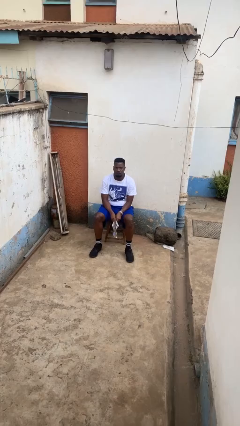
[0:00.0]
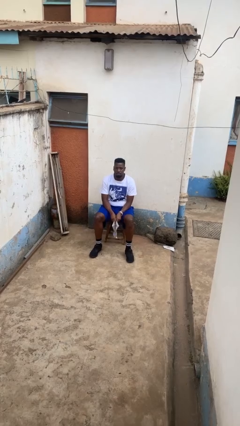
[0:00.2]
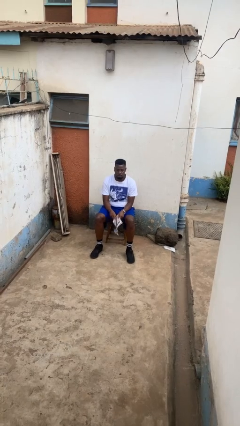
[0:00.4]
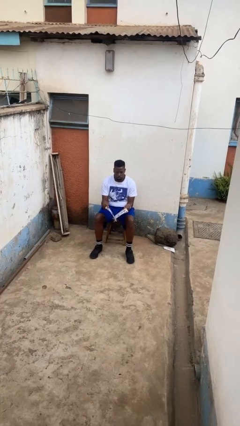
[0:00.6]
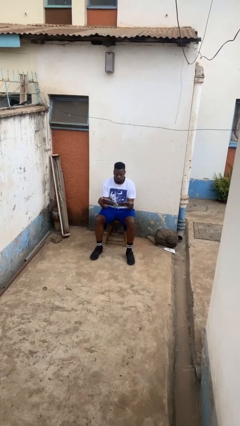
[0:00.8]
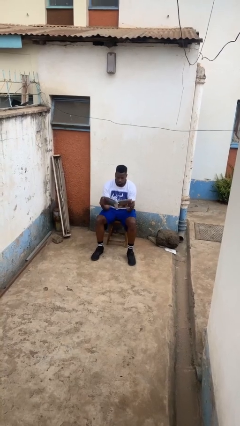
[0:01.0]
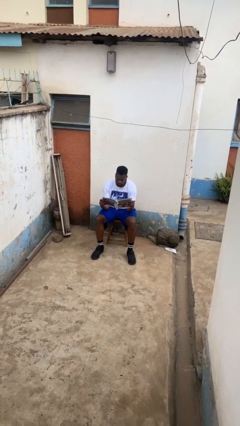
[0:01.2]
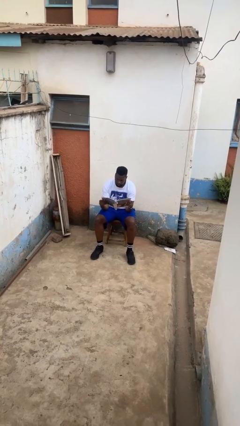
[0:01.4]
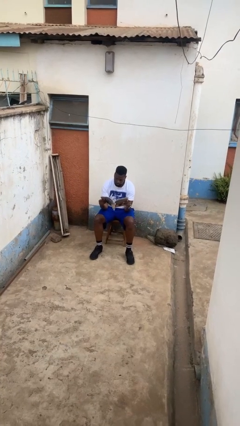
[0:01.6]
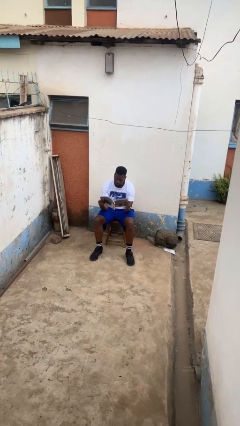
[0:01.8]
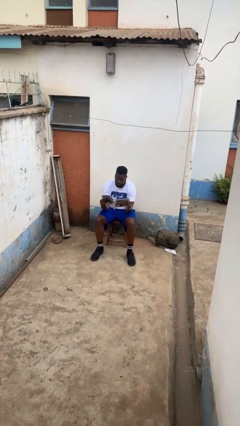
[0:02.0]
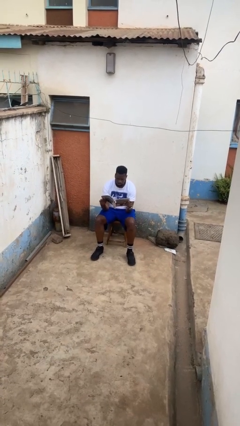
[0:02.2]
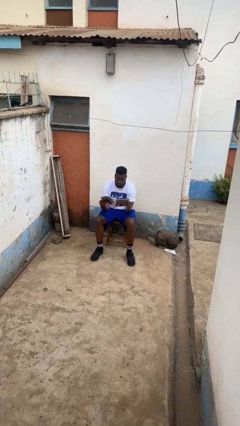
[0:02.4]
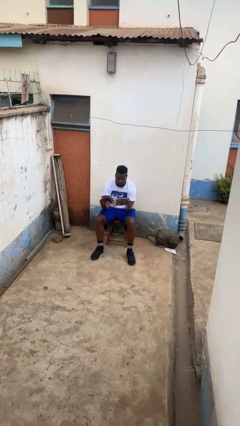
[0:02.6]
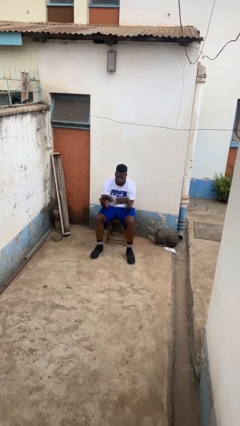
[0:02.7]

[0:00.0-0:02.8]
person reads magazine

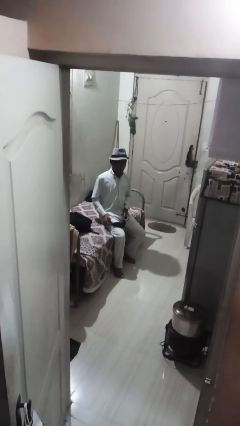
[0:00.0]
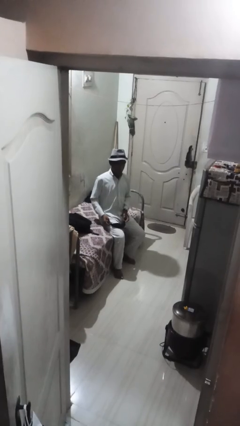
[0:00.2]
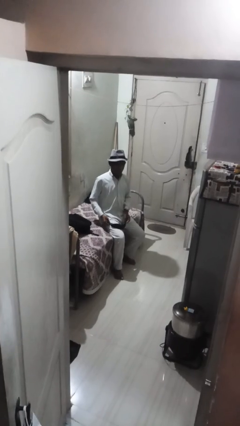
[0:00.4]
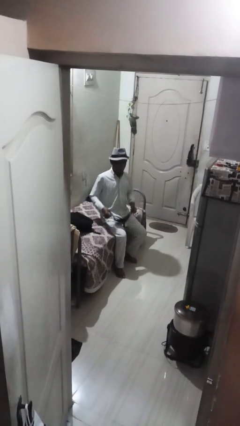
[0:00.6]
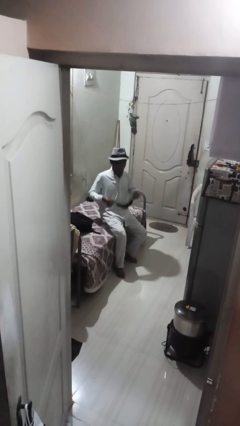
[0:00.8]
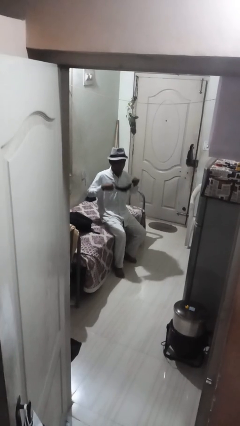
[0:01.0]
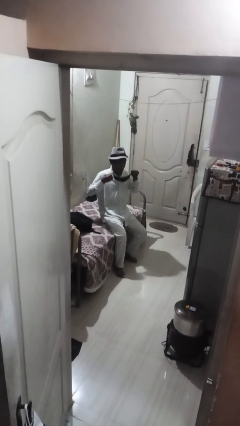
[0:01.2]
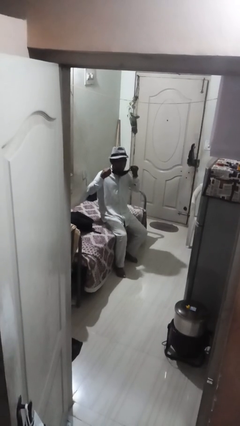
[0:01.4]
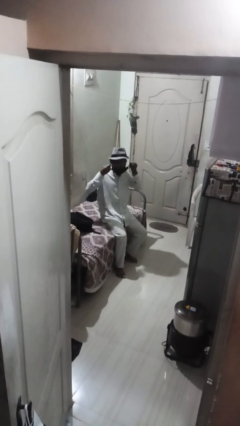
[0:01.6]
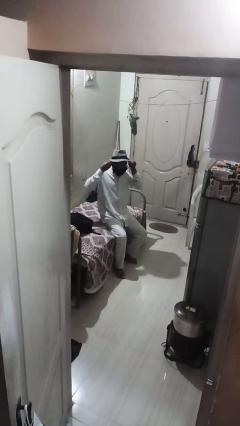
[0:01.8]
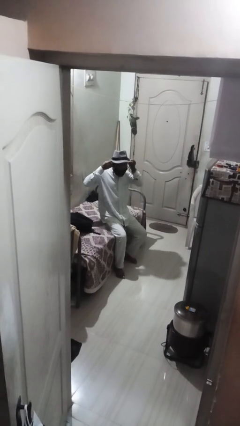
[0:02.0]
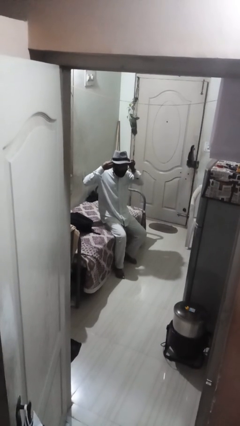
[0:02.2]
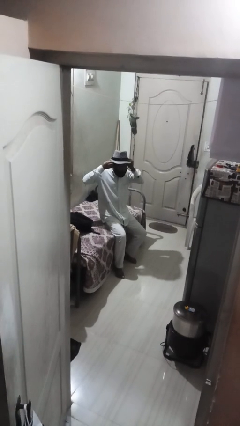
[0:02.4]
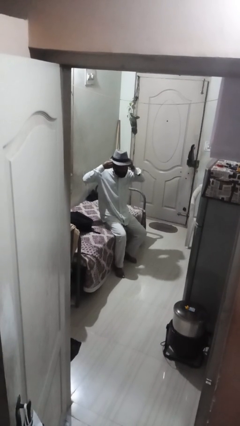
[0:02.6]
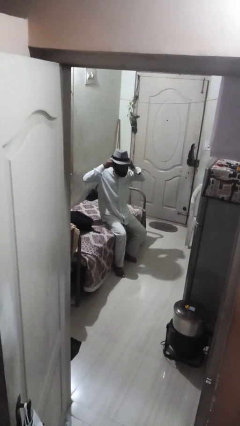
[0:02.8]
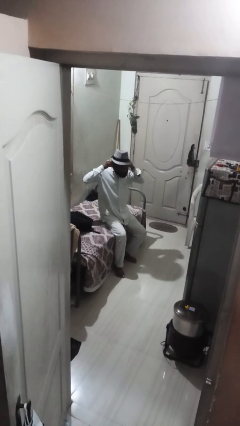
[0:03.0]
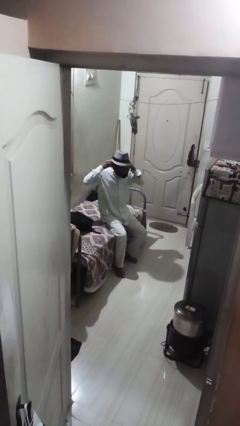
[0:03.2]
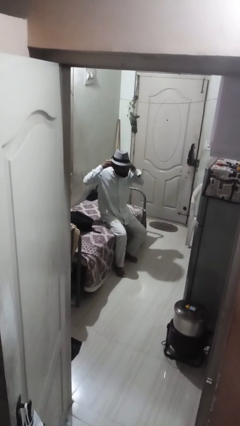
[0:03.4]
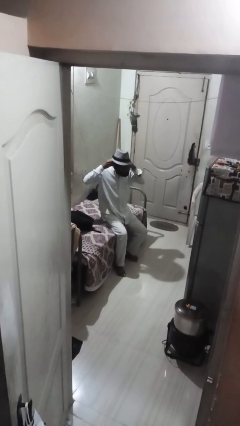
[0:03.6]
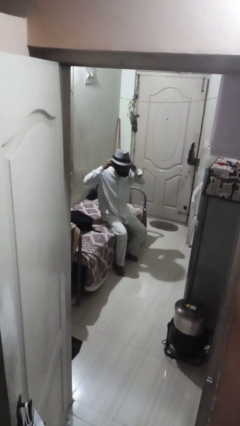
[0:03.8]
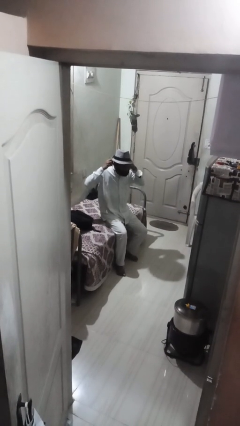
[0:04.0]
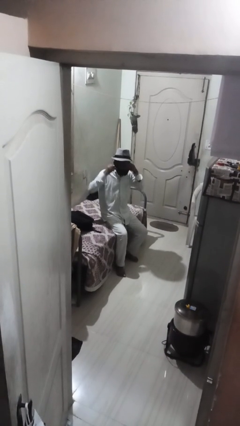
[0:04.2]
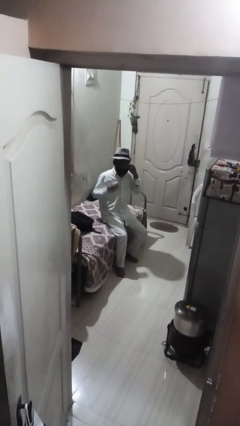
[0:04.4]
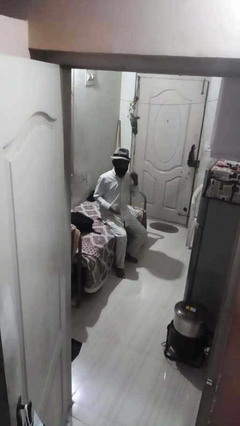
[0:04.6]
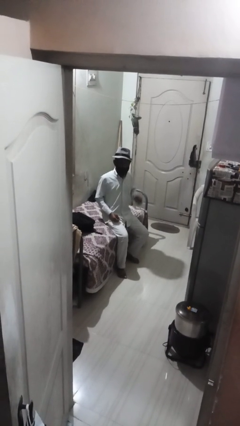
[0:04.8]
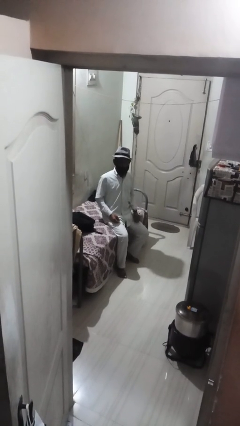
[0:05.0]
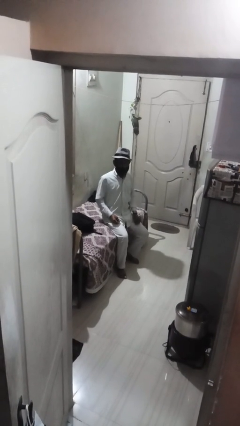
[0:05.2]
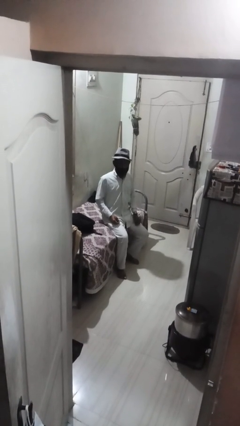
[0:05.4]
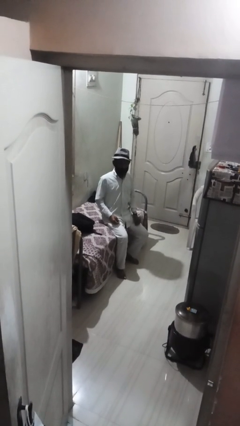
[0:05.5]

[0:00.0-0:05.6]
person puts on facemask

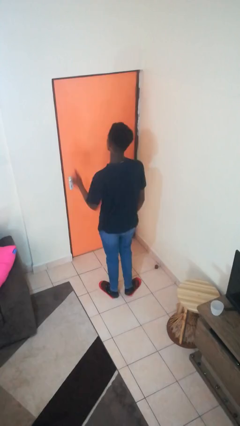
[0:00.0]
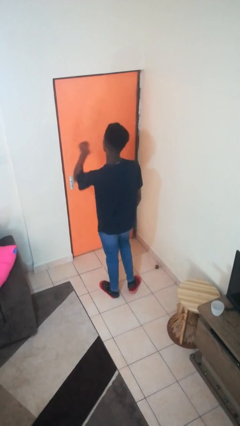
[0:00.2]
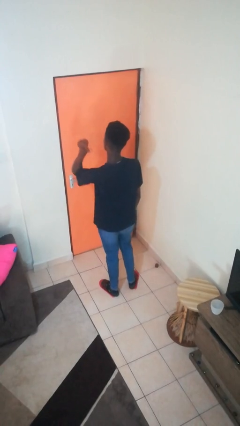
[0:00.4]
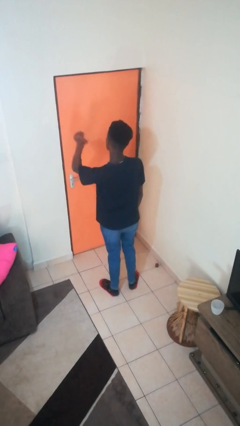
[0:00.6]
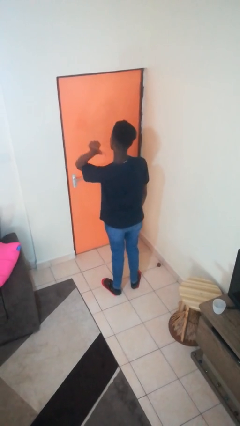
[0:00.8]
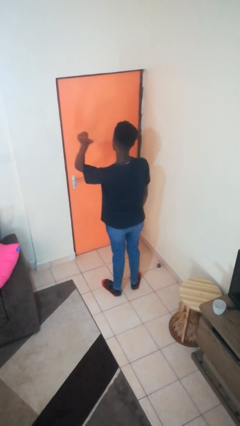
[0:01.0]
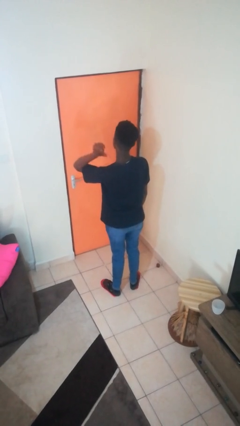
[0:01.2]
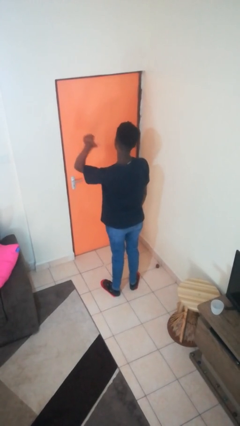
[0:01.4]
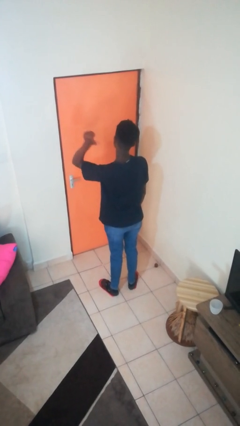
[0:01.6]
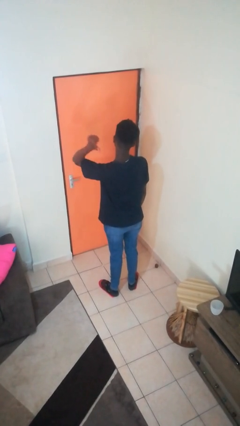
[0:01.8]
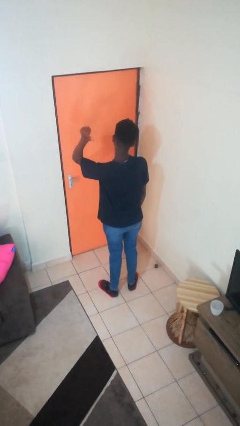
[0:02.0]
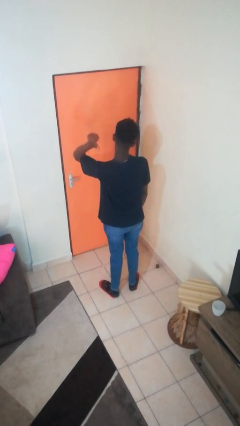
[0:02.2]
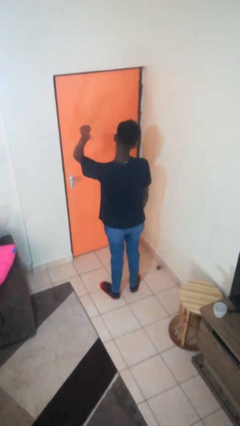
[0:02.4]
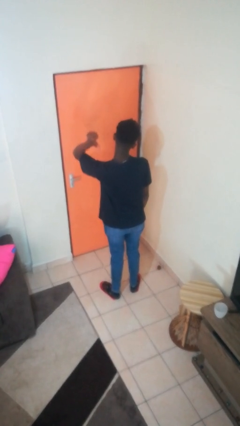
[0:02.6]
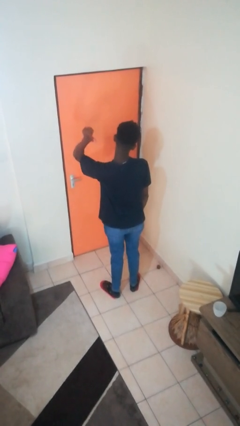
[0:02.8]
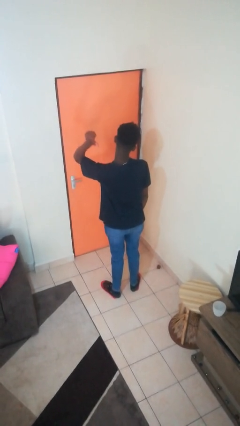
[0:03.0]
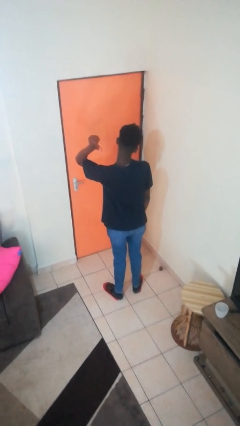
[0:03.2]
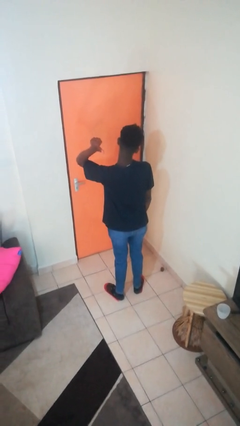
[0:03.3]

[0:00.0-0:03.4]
person gestures behind me

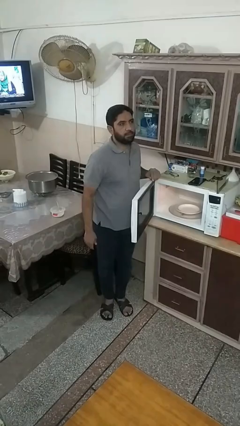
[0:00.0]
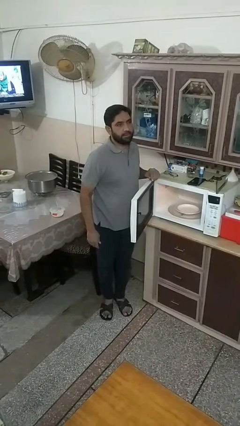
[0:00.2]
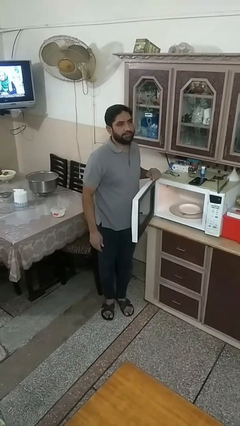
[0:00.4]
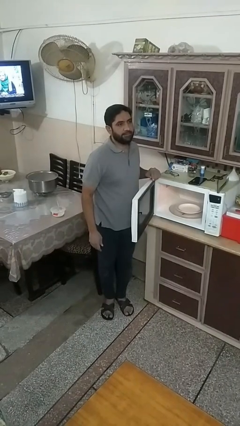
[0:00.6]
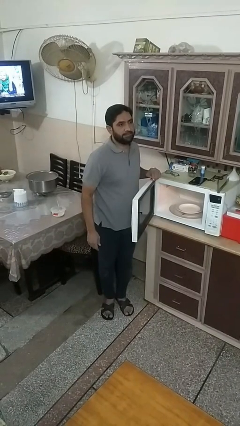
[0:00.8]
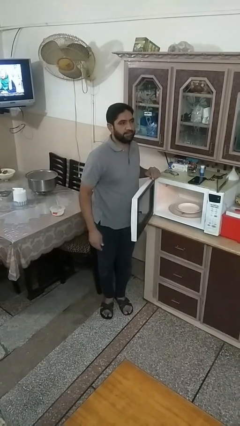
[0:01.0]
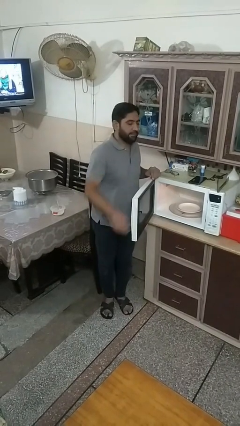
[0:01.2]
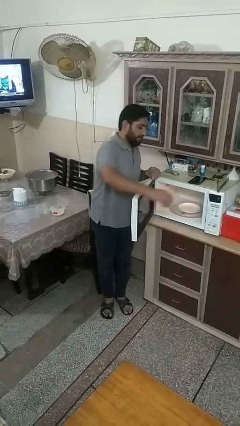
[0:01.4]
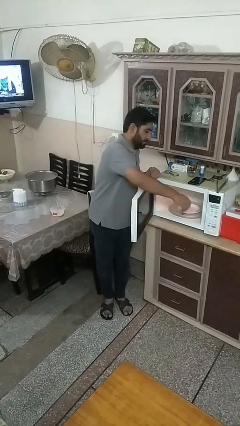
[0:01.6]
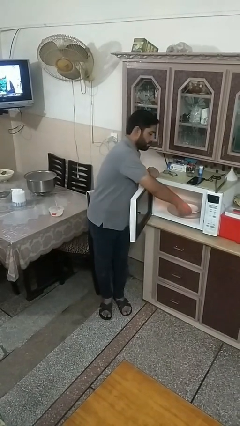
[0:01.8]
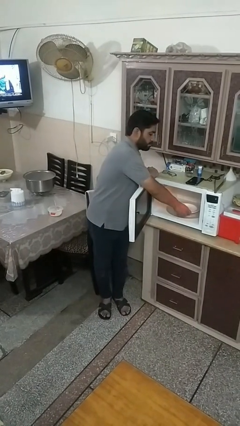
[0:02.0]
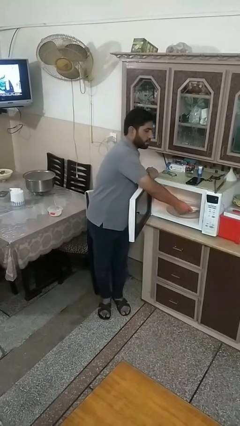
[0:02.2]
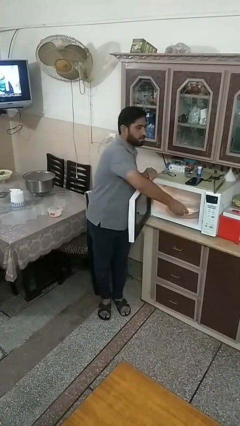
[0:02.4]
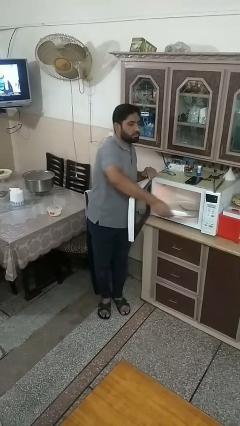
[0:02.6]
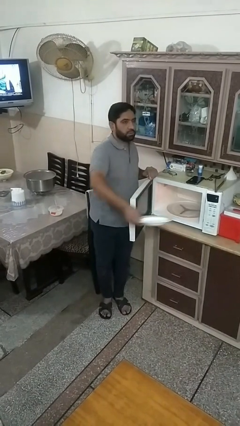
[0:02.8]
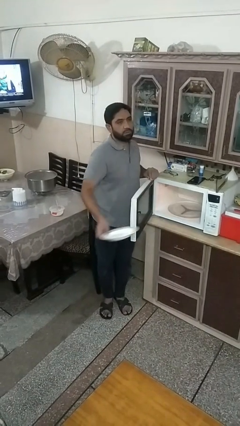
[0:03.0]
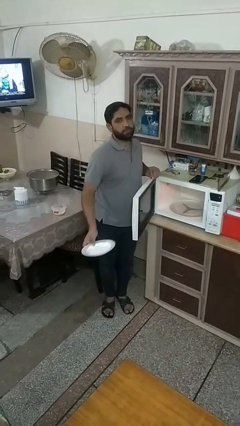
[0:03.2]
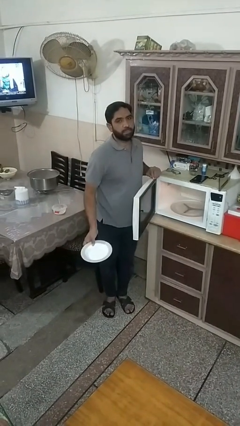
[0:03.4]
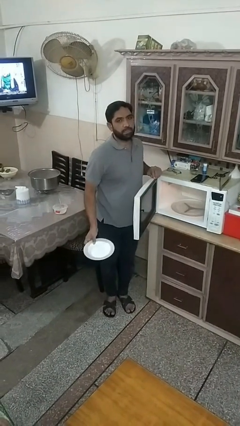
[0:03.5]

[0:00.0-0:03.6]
person takes object from microwave

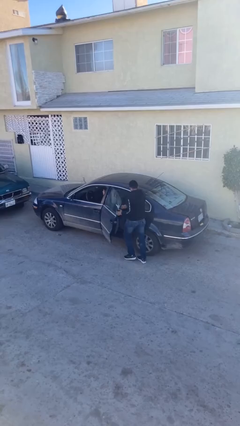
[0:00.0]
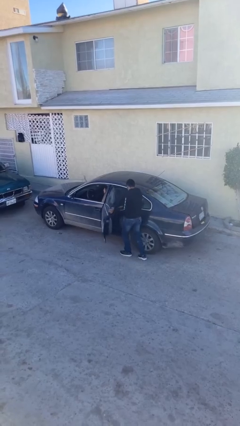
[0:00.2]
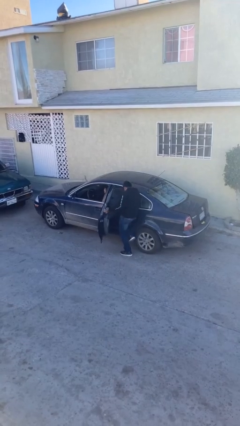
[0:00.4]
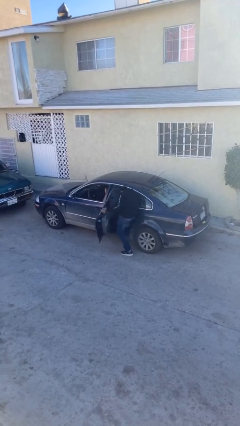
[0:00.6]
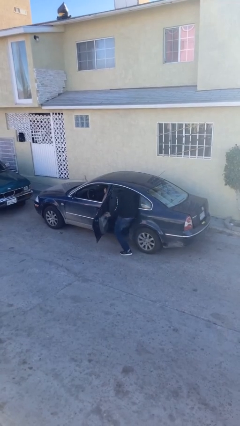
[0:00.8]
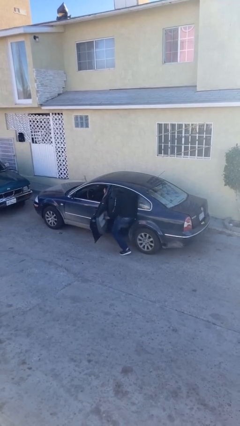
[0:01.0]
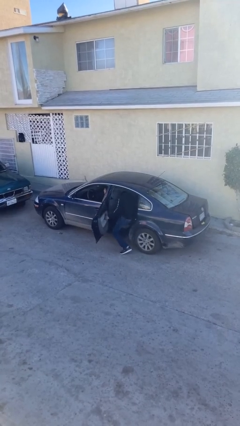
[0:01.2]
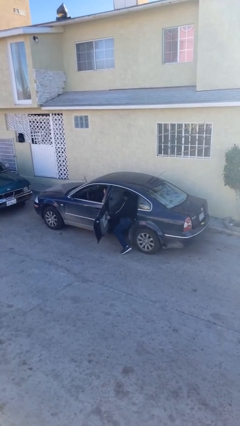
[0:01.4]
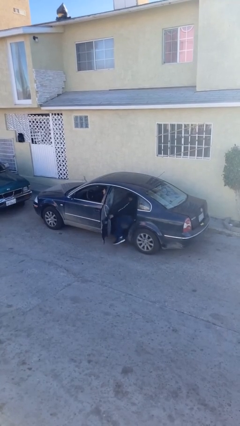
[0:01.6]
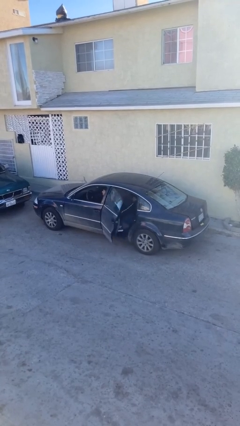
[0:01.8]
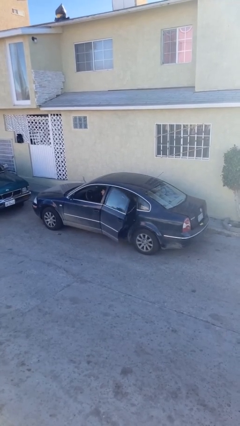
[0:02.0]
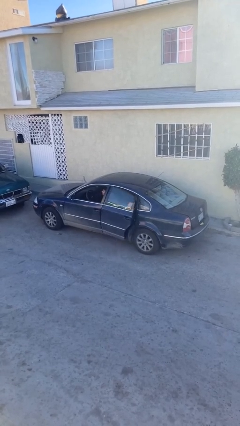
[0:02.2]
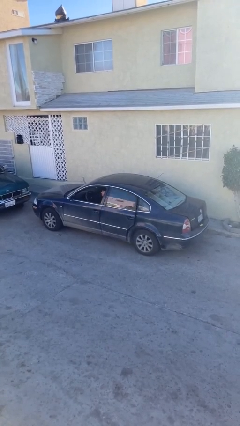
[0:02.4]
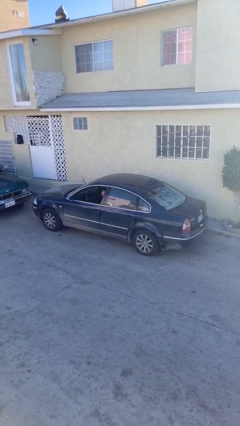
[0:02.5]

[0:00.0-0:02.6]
car picks up person
